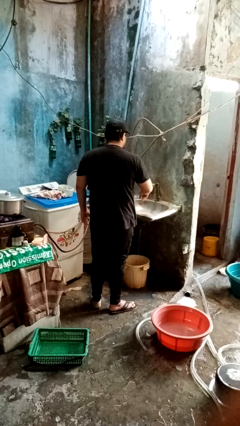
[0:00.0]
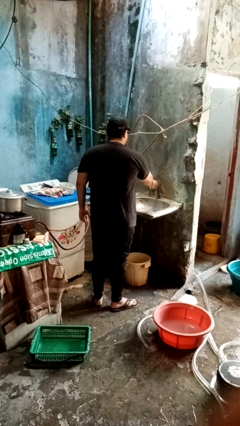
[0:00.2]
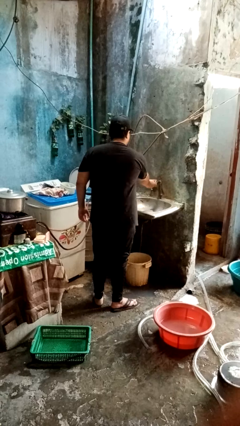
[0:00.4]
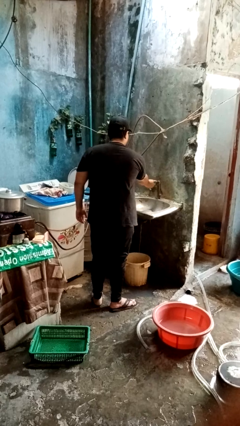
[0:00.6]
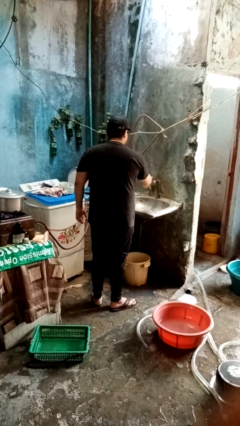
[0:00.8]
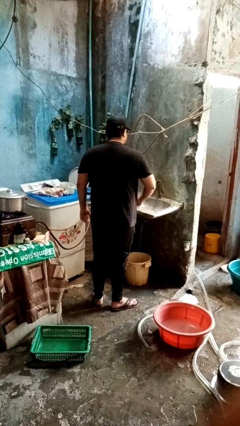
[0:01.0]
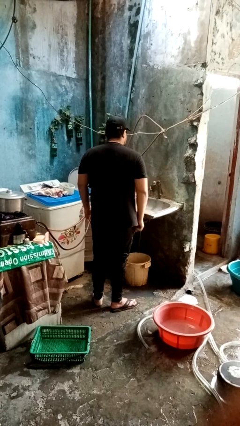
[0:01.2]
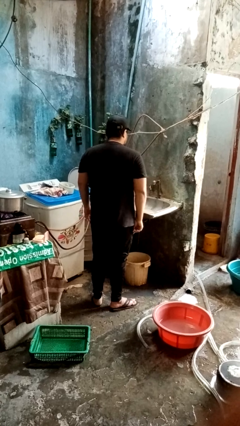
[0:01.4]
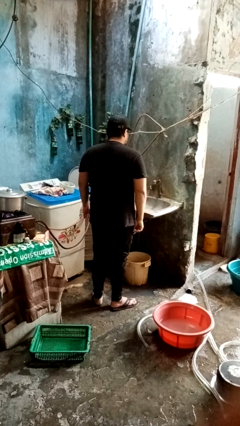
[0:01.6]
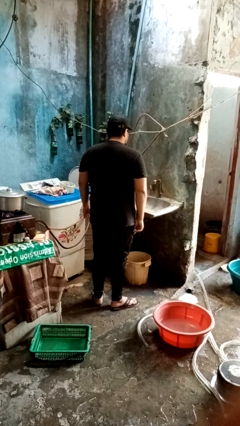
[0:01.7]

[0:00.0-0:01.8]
person turns off faucet

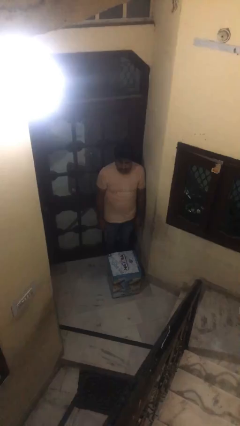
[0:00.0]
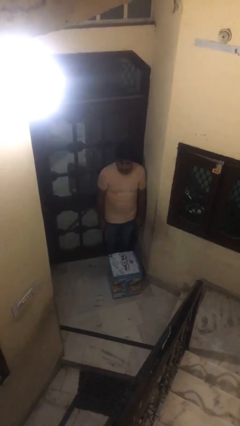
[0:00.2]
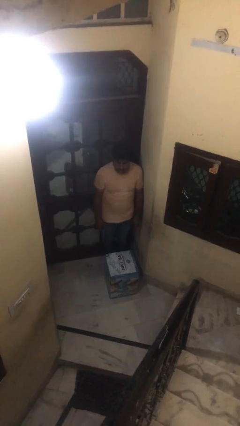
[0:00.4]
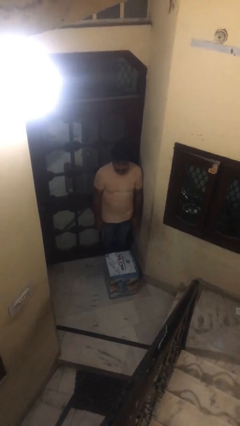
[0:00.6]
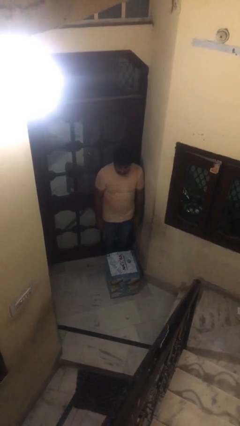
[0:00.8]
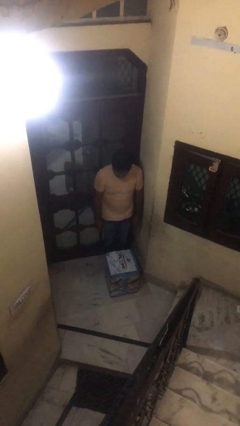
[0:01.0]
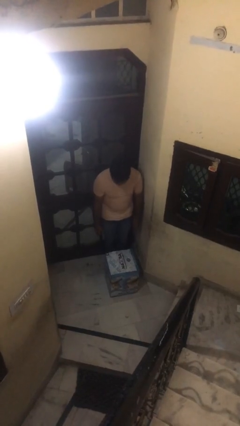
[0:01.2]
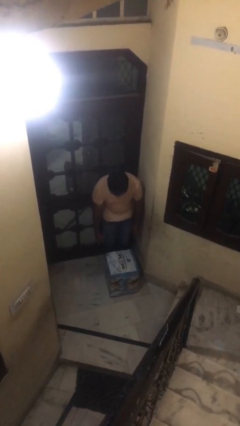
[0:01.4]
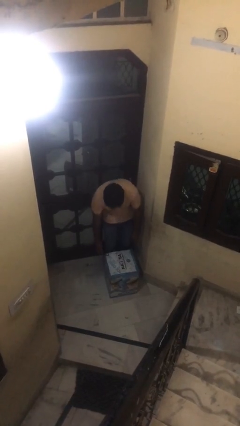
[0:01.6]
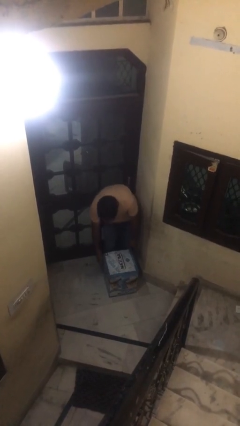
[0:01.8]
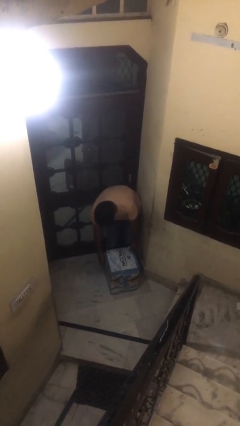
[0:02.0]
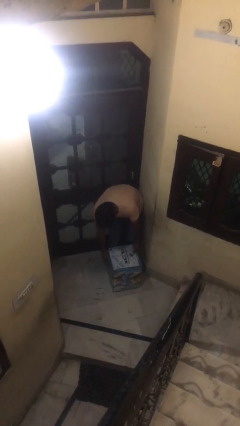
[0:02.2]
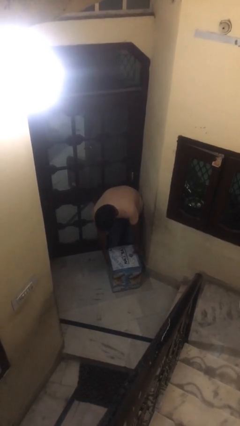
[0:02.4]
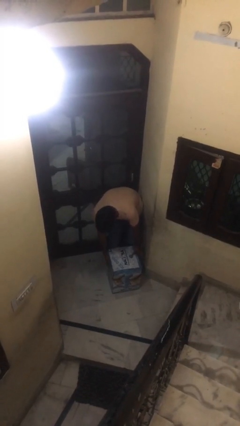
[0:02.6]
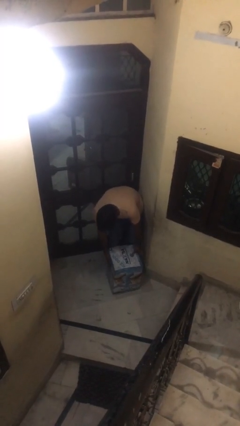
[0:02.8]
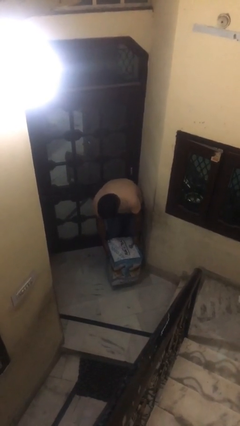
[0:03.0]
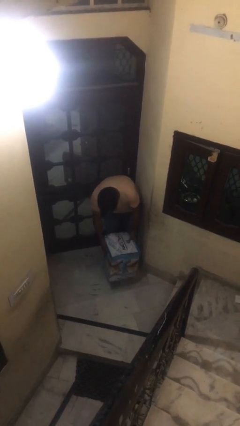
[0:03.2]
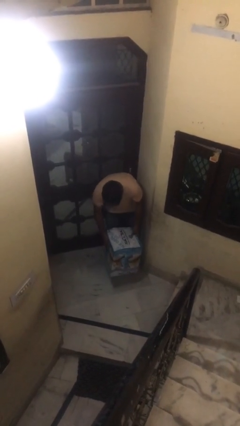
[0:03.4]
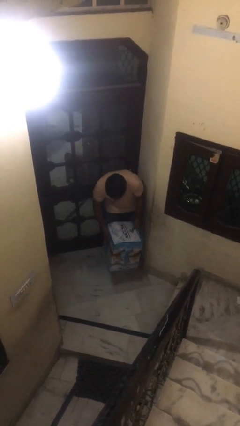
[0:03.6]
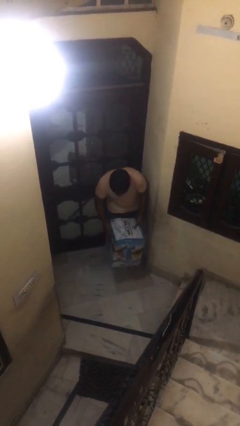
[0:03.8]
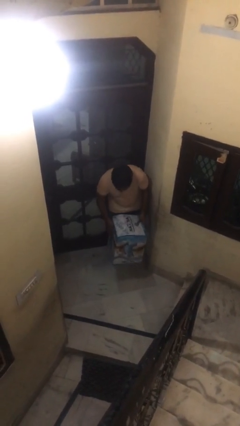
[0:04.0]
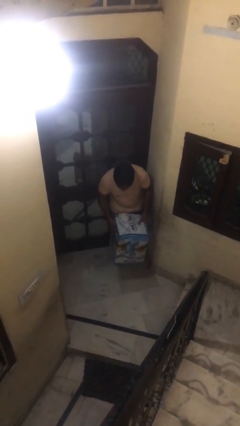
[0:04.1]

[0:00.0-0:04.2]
person picks up object from floor

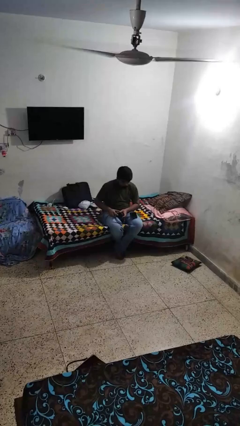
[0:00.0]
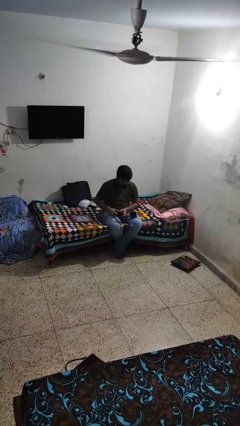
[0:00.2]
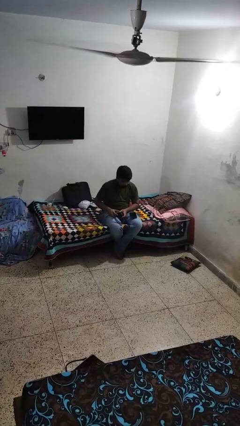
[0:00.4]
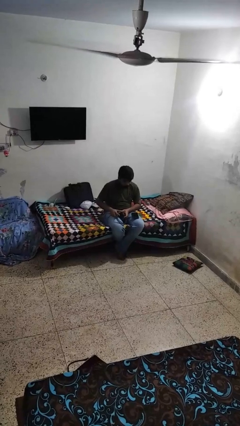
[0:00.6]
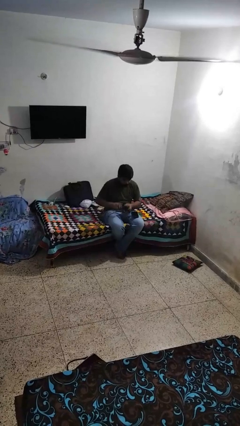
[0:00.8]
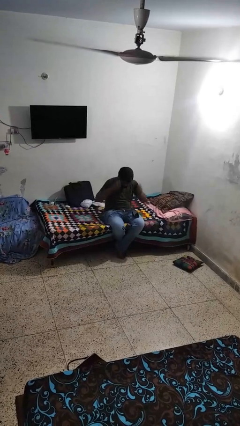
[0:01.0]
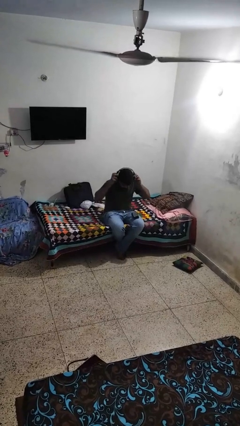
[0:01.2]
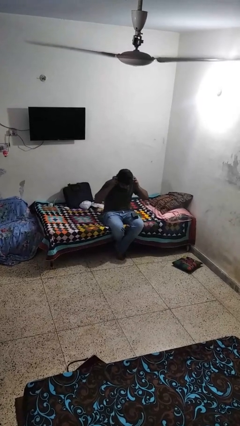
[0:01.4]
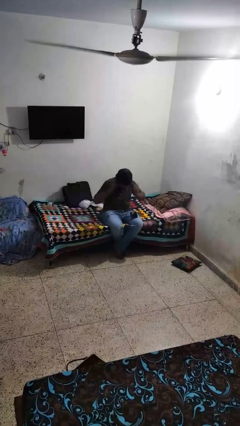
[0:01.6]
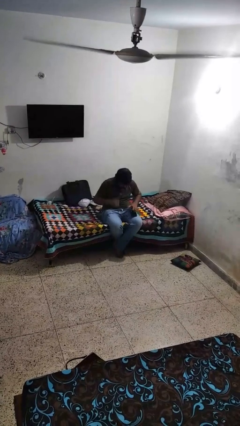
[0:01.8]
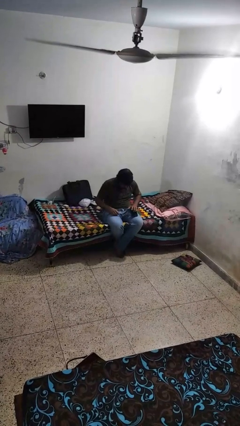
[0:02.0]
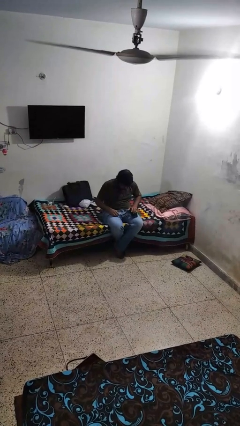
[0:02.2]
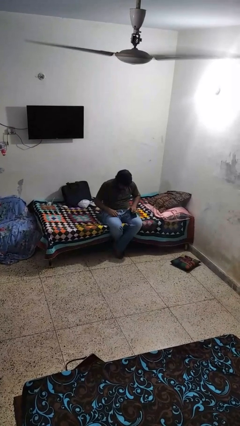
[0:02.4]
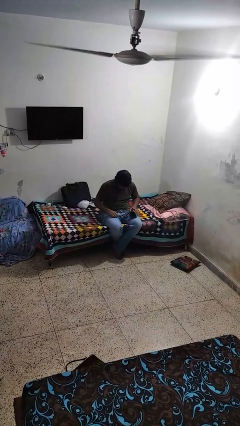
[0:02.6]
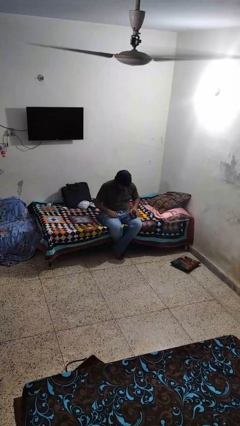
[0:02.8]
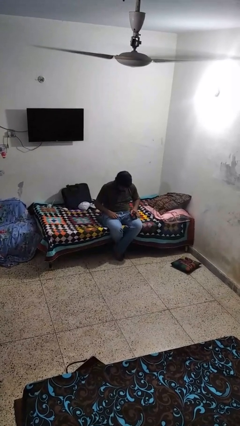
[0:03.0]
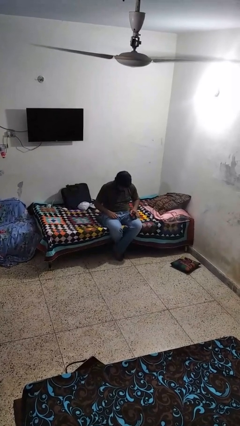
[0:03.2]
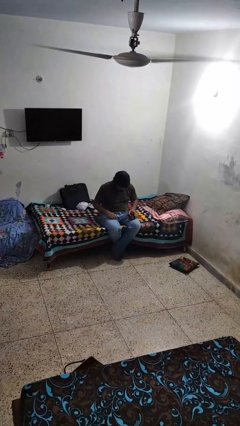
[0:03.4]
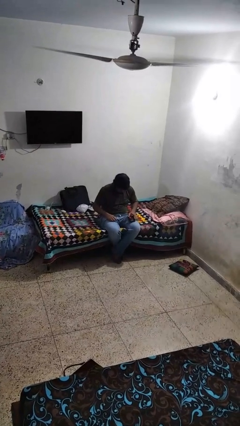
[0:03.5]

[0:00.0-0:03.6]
person puts on headphones

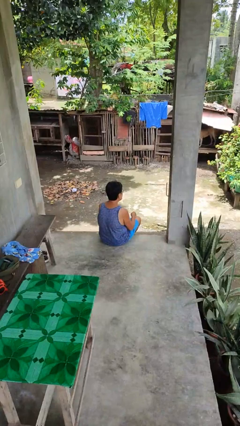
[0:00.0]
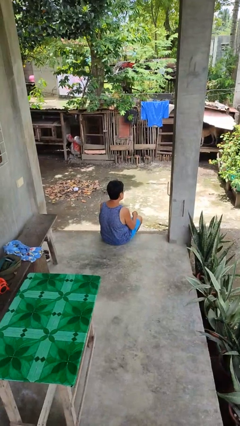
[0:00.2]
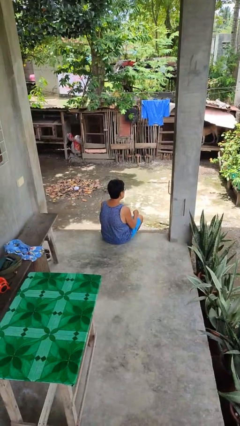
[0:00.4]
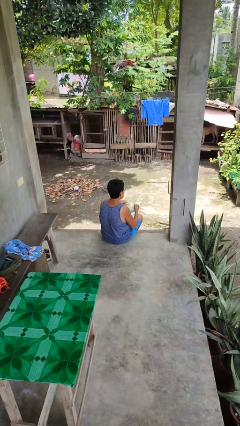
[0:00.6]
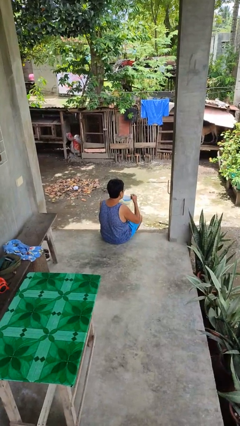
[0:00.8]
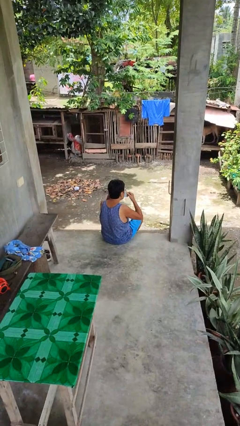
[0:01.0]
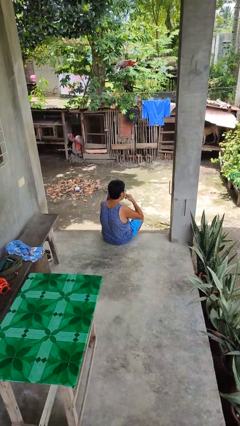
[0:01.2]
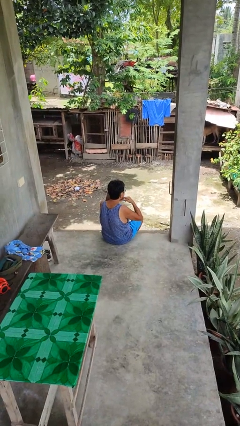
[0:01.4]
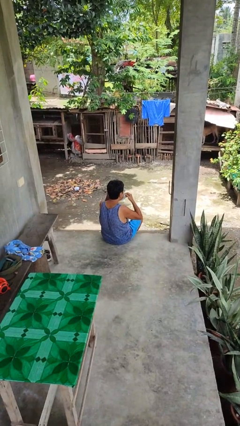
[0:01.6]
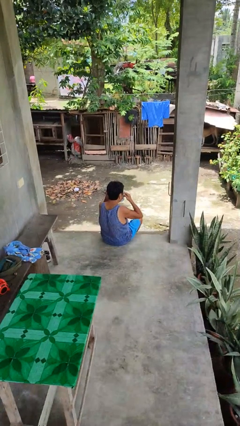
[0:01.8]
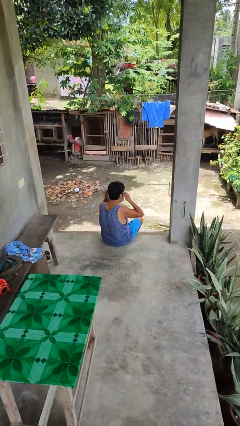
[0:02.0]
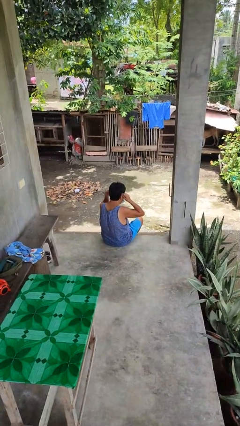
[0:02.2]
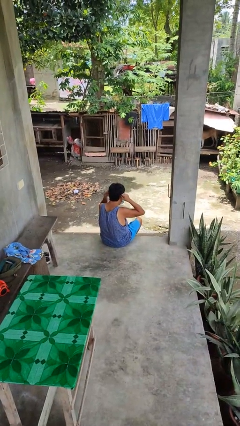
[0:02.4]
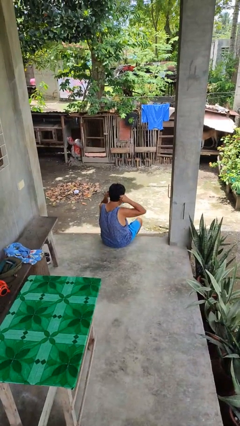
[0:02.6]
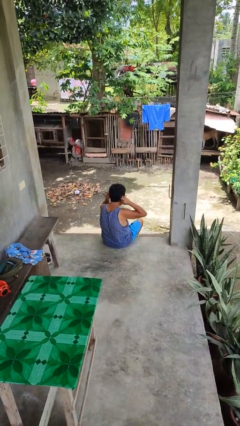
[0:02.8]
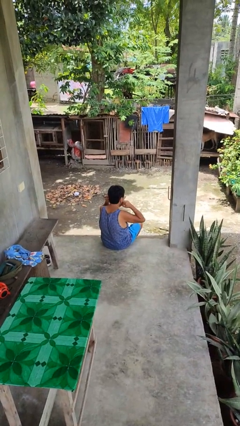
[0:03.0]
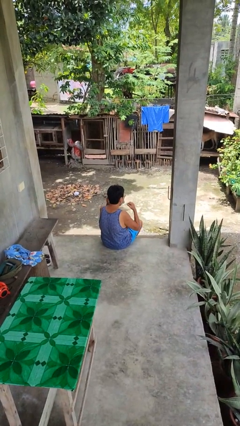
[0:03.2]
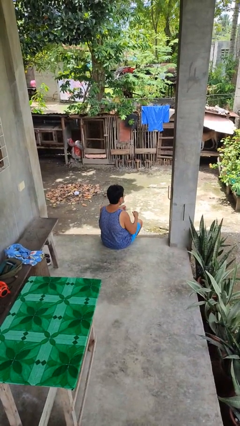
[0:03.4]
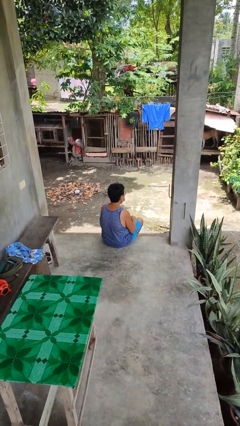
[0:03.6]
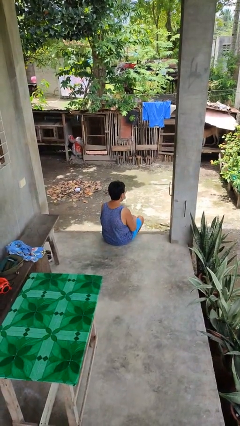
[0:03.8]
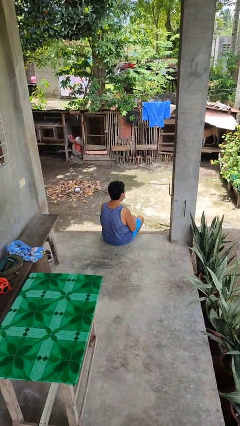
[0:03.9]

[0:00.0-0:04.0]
person puts on facemask

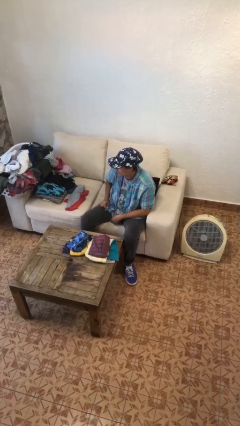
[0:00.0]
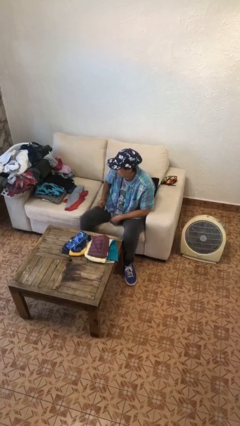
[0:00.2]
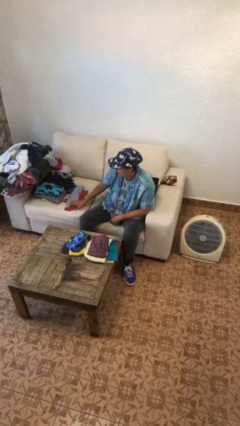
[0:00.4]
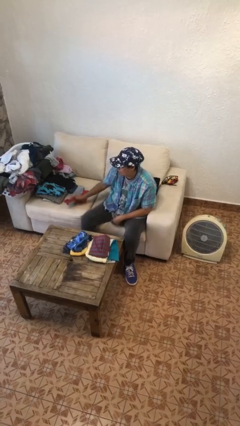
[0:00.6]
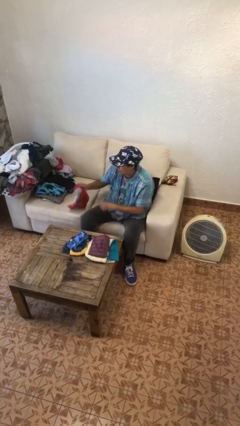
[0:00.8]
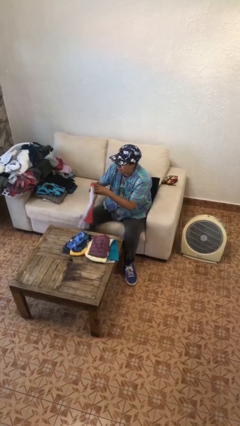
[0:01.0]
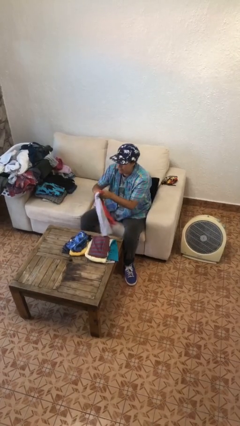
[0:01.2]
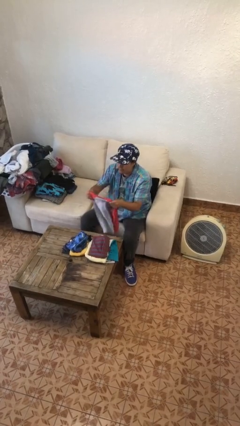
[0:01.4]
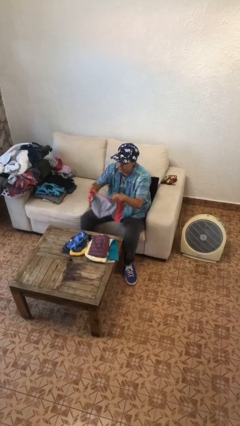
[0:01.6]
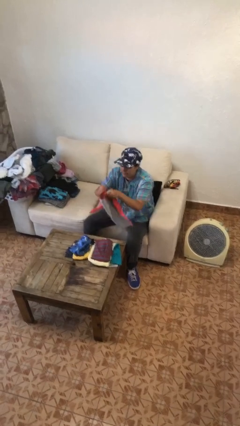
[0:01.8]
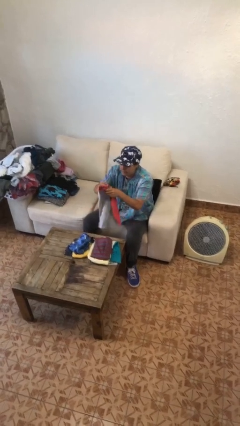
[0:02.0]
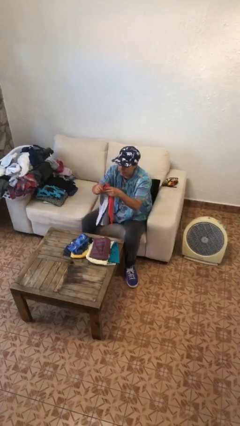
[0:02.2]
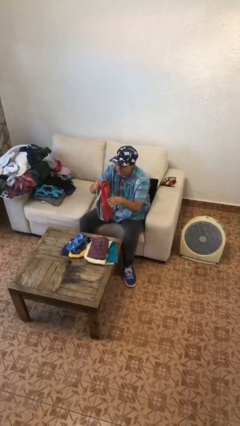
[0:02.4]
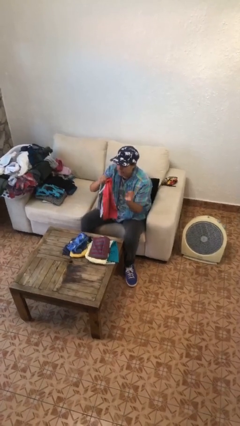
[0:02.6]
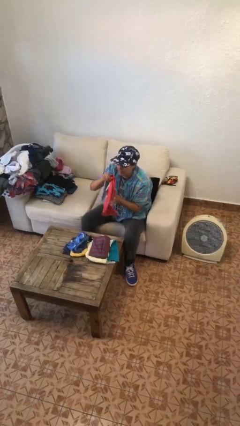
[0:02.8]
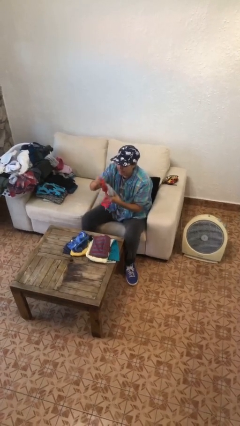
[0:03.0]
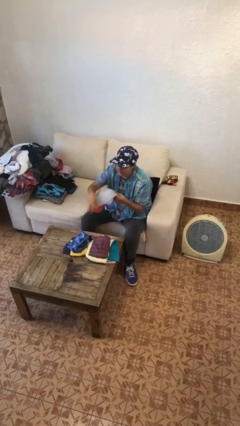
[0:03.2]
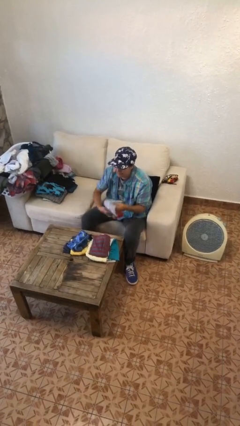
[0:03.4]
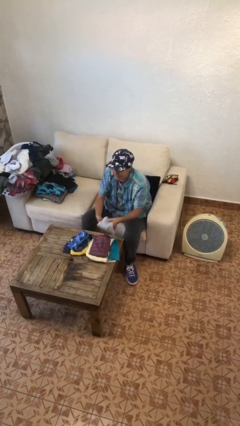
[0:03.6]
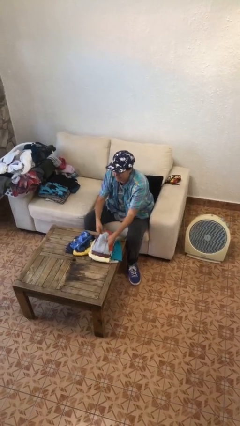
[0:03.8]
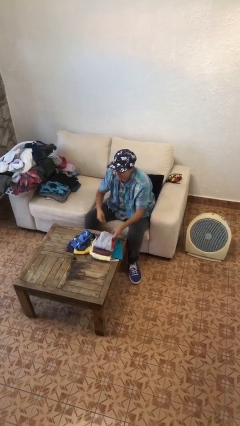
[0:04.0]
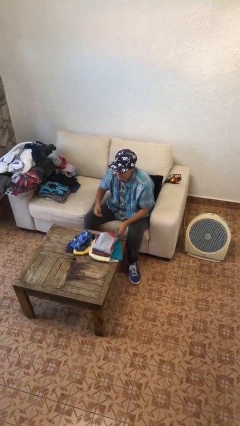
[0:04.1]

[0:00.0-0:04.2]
person folds shirt
